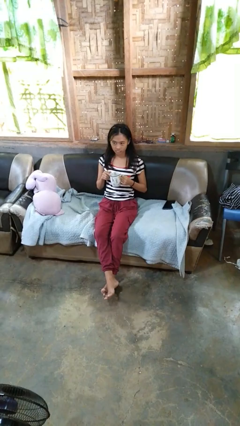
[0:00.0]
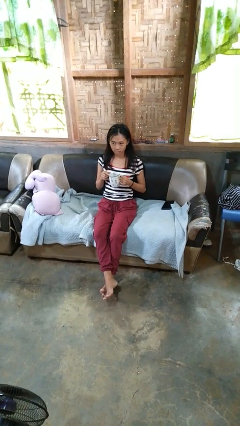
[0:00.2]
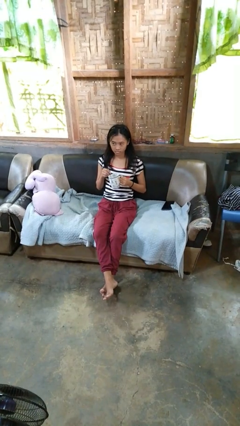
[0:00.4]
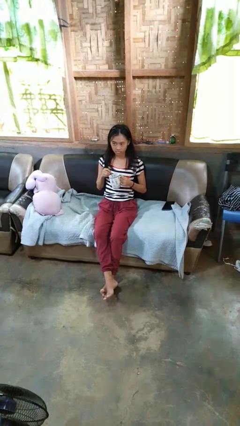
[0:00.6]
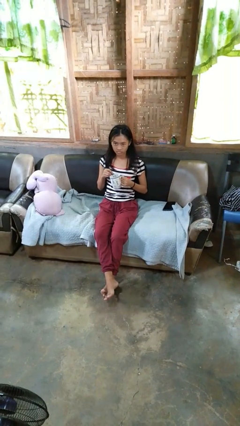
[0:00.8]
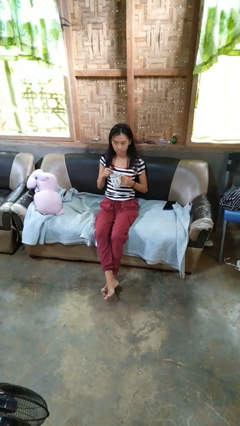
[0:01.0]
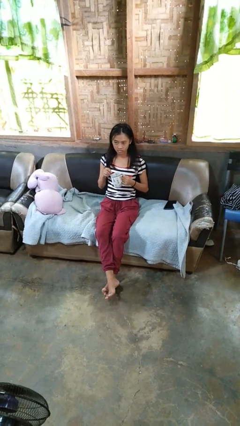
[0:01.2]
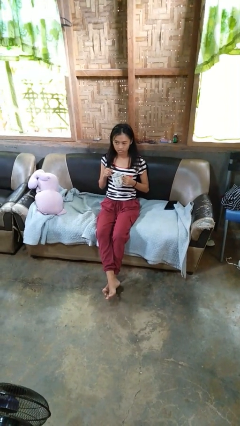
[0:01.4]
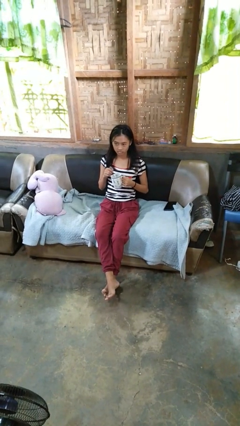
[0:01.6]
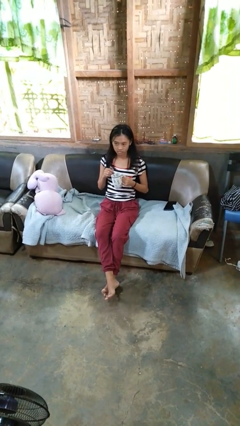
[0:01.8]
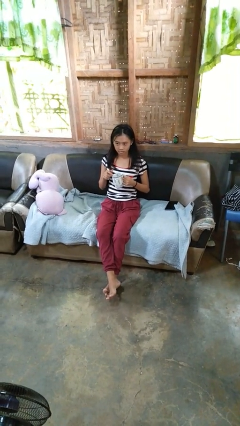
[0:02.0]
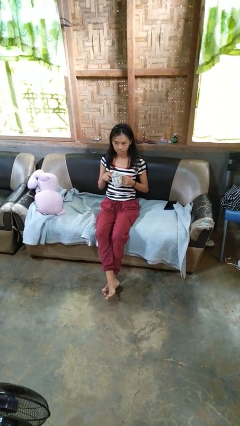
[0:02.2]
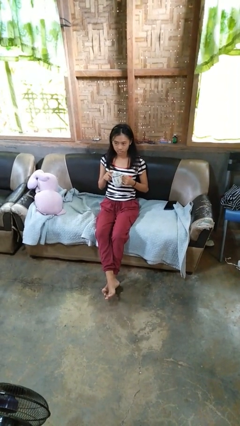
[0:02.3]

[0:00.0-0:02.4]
person stirs mug

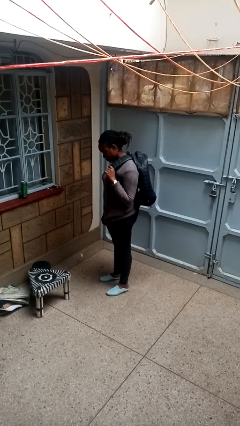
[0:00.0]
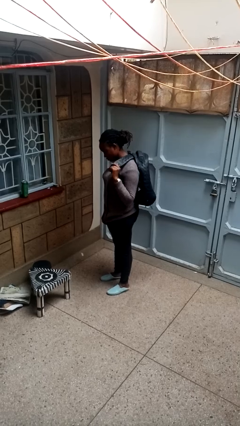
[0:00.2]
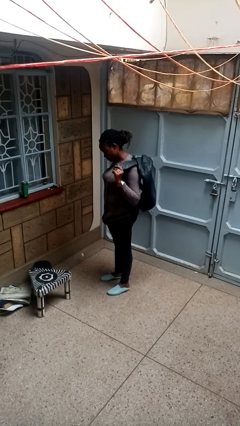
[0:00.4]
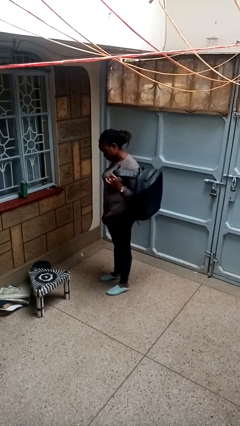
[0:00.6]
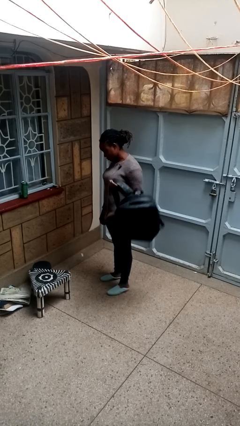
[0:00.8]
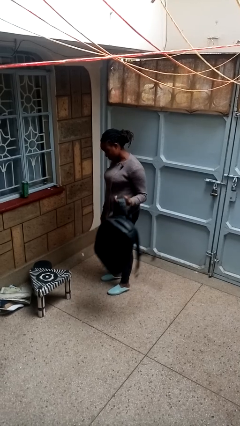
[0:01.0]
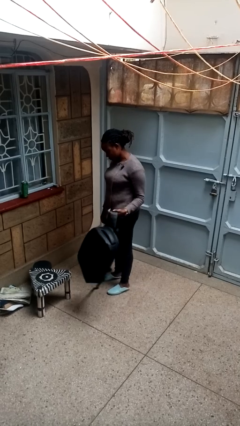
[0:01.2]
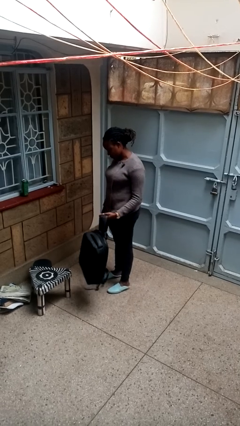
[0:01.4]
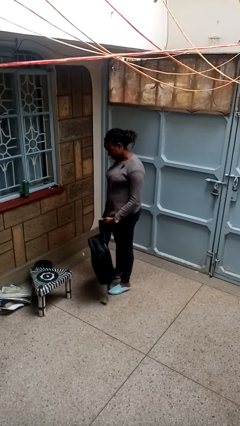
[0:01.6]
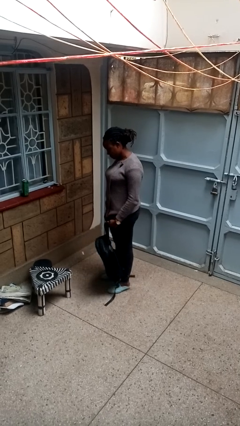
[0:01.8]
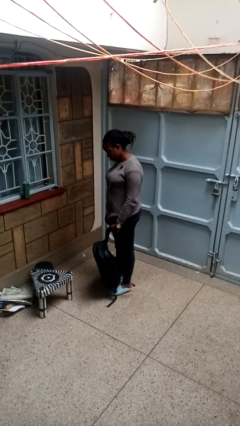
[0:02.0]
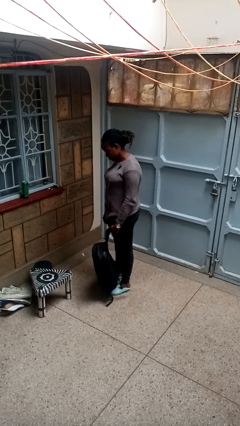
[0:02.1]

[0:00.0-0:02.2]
person takes off backpack

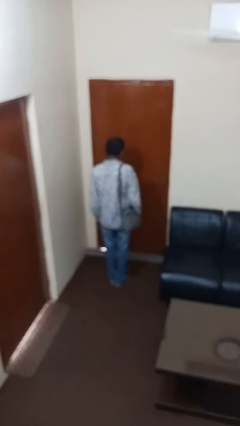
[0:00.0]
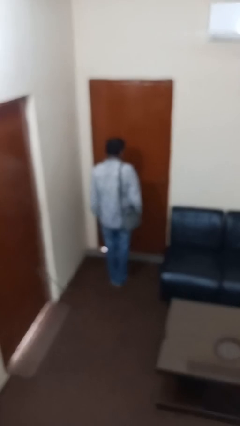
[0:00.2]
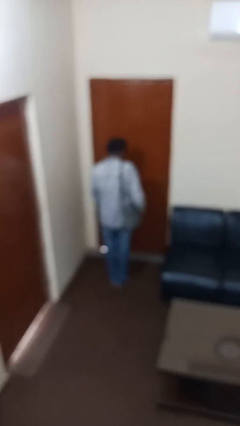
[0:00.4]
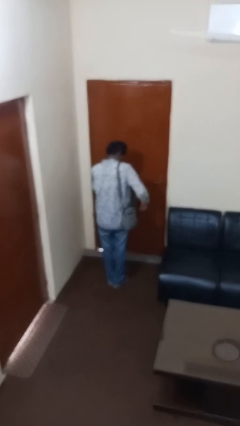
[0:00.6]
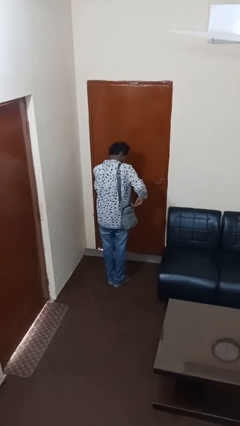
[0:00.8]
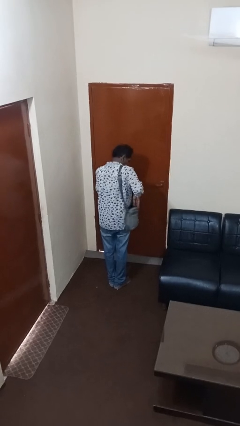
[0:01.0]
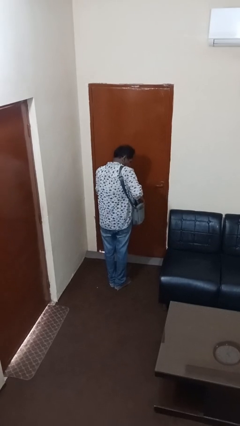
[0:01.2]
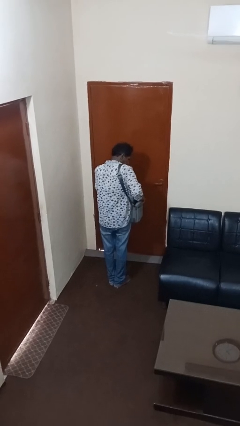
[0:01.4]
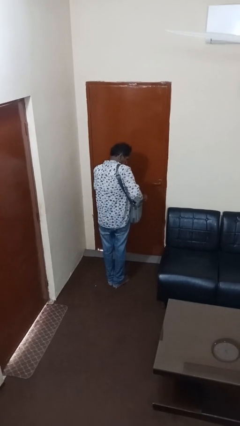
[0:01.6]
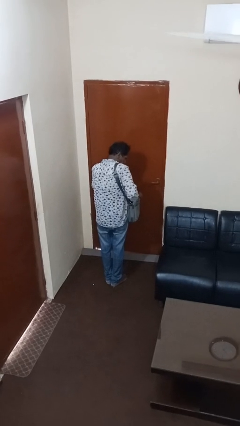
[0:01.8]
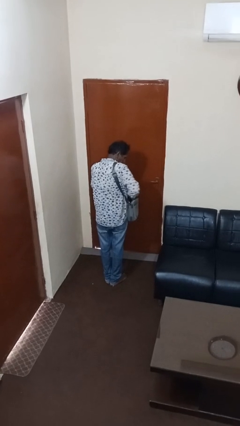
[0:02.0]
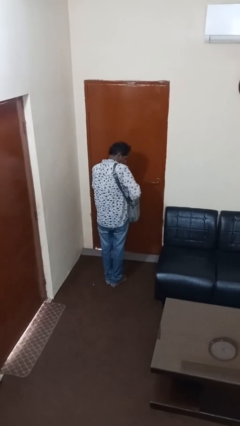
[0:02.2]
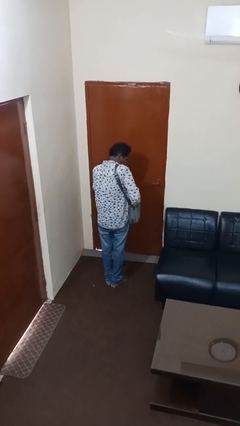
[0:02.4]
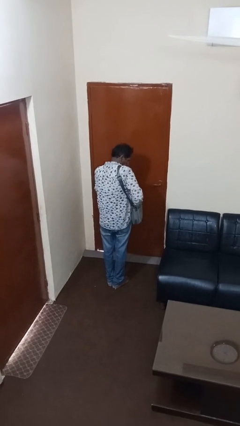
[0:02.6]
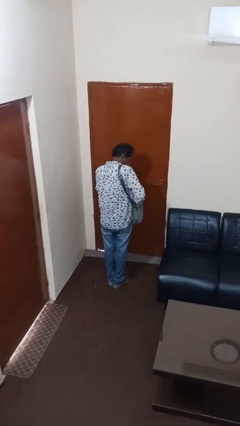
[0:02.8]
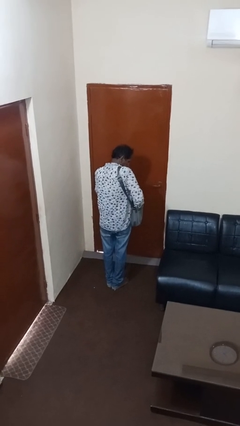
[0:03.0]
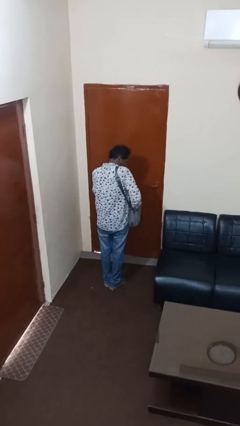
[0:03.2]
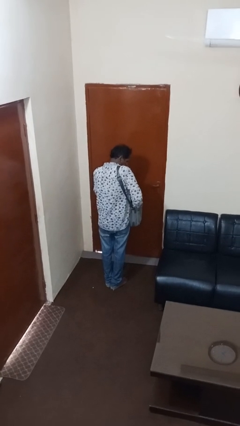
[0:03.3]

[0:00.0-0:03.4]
person searches in purse

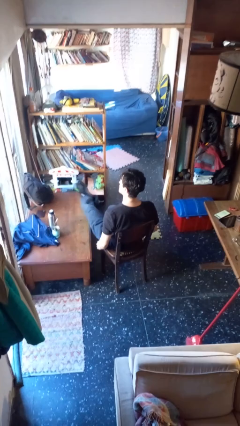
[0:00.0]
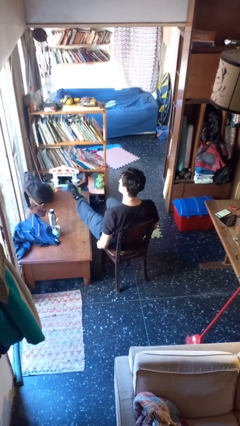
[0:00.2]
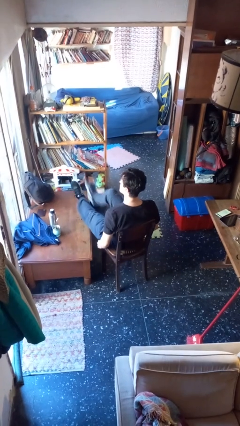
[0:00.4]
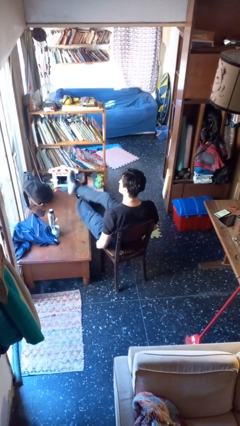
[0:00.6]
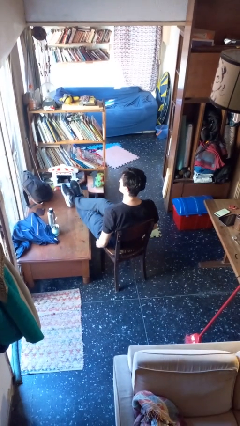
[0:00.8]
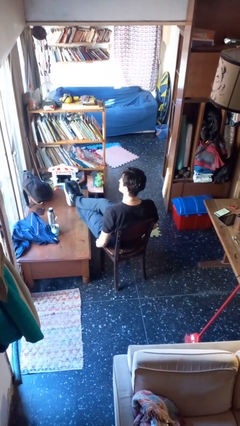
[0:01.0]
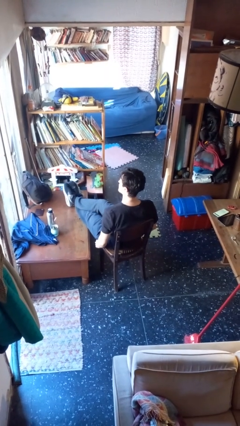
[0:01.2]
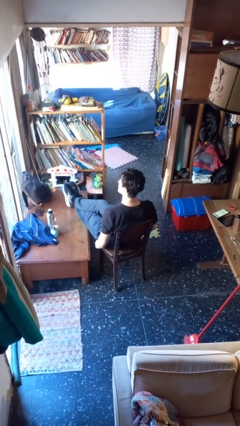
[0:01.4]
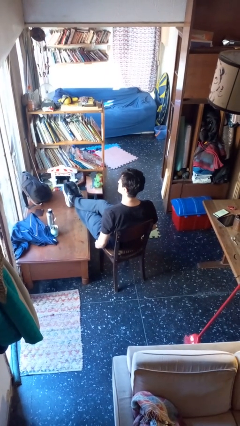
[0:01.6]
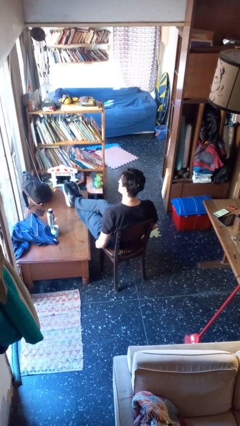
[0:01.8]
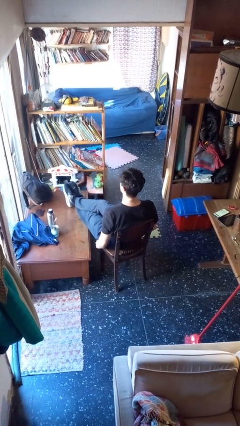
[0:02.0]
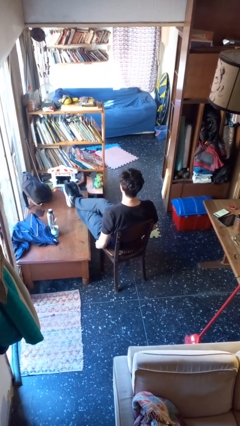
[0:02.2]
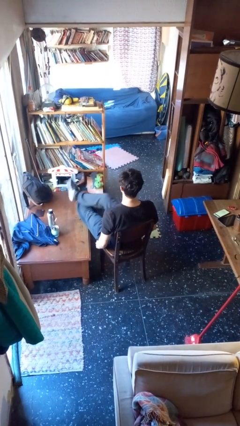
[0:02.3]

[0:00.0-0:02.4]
person puts feet up

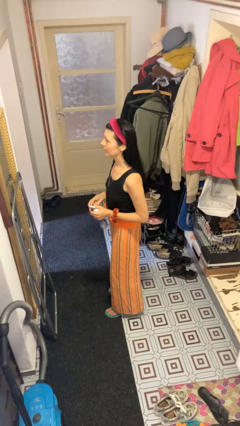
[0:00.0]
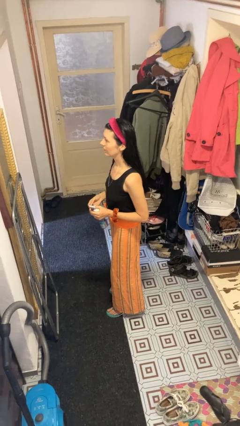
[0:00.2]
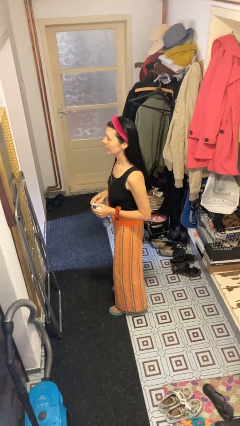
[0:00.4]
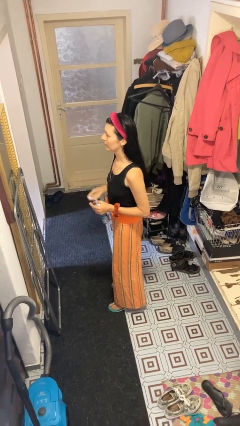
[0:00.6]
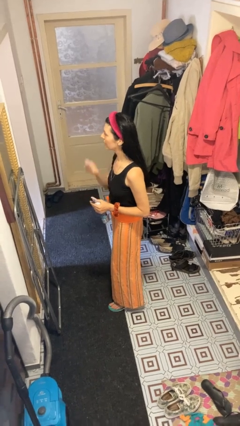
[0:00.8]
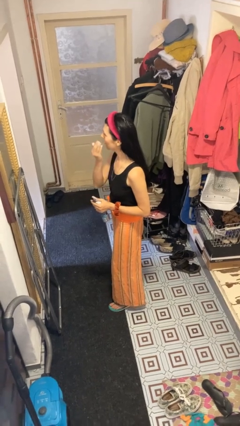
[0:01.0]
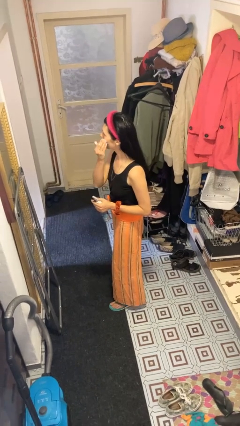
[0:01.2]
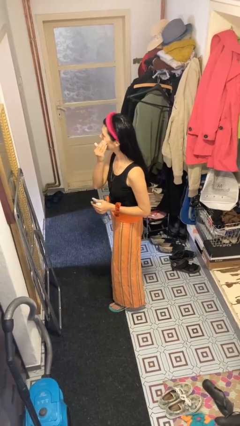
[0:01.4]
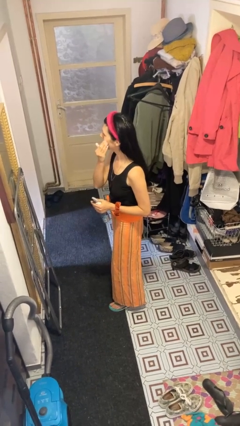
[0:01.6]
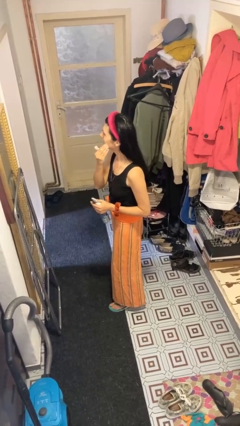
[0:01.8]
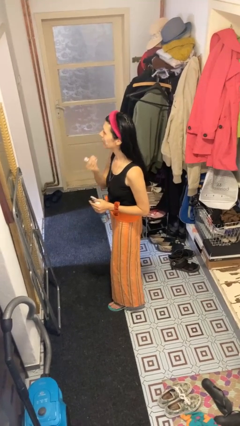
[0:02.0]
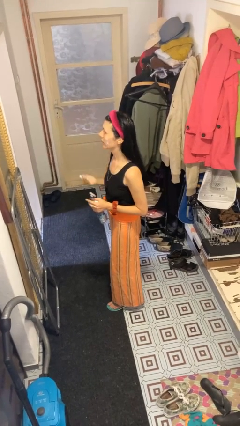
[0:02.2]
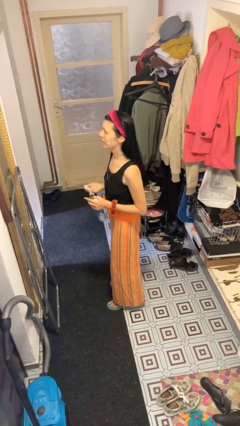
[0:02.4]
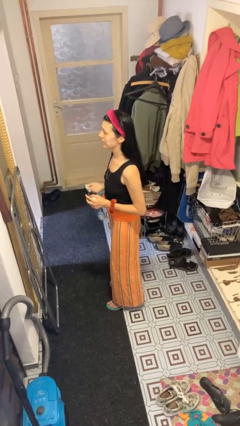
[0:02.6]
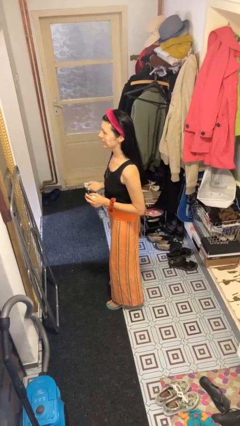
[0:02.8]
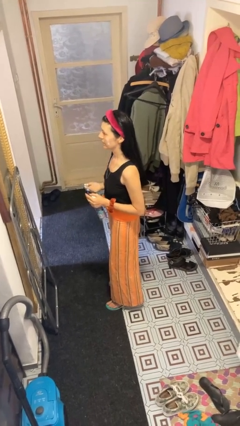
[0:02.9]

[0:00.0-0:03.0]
person applies shaving cream

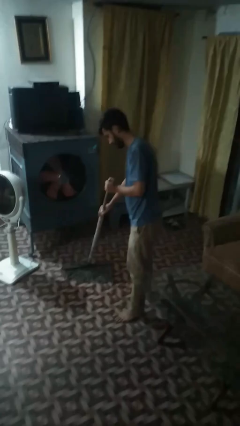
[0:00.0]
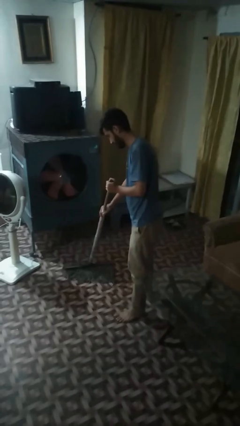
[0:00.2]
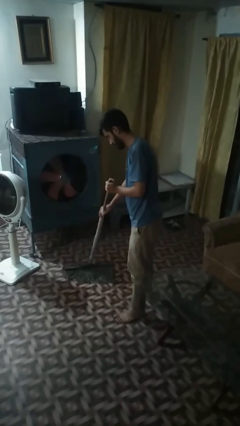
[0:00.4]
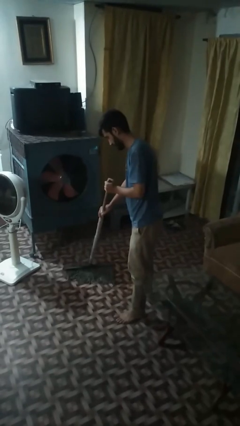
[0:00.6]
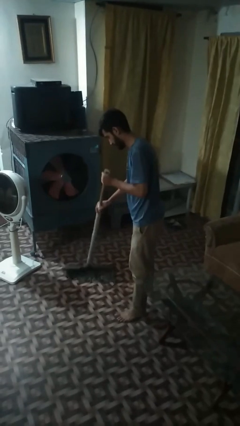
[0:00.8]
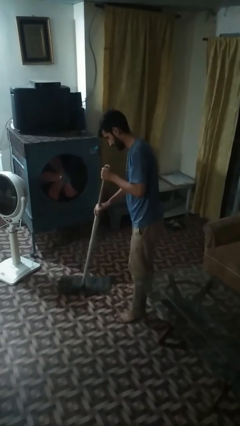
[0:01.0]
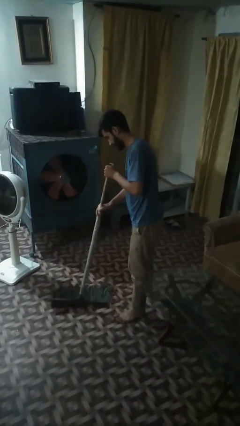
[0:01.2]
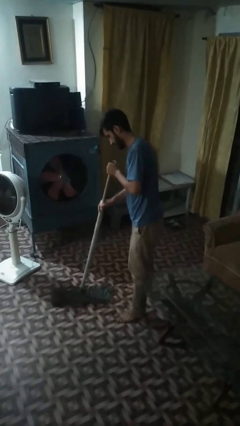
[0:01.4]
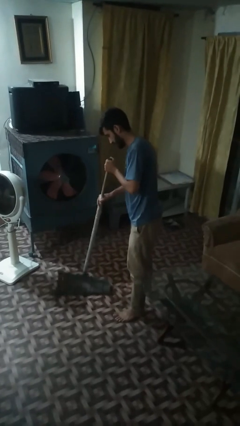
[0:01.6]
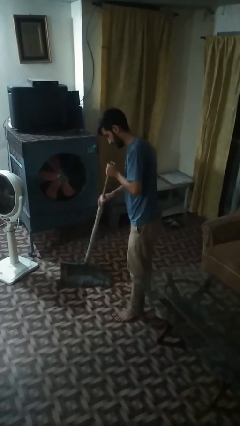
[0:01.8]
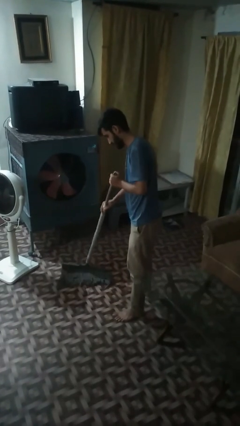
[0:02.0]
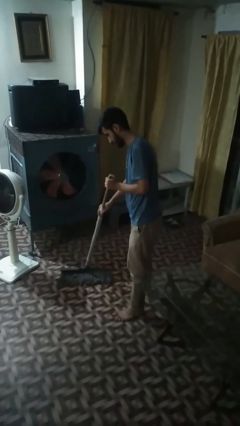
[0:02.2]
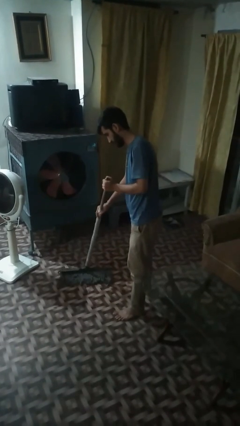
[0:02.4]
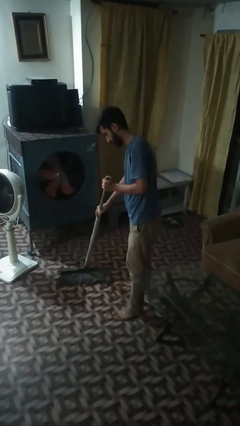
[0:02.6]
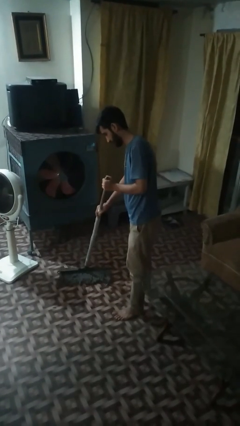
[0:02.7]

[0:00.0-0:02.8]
person mops

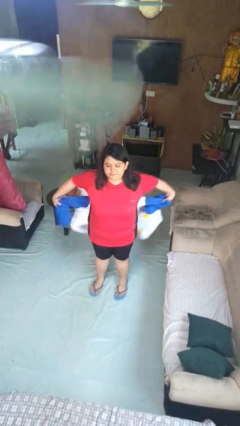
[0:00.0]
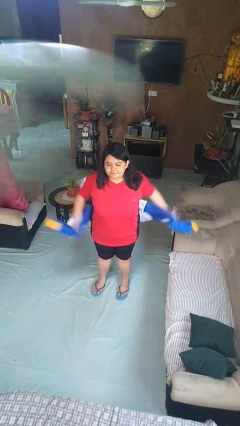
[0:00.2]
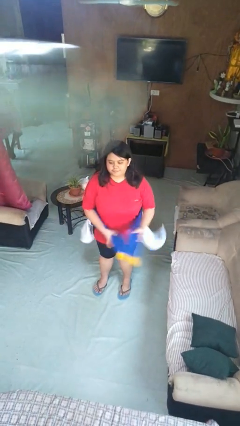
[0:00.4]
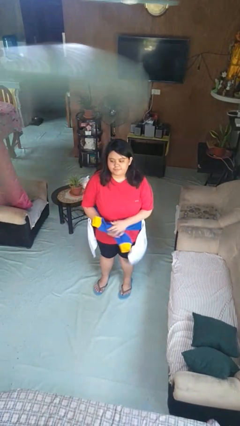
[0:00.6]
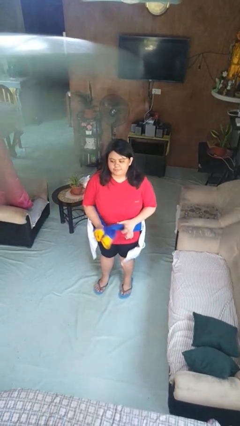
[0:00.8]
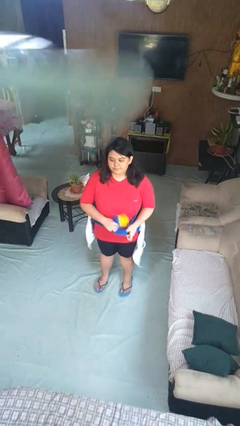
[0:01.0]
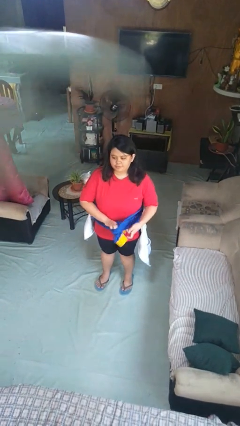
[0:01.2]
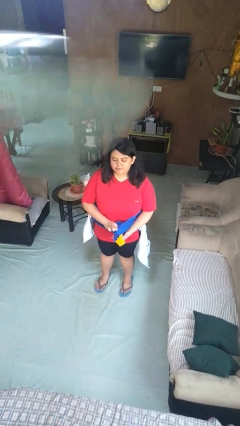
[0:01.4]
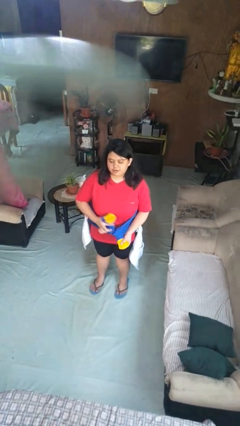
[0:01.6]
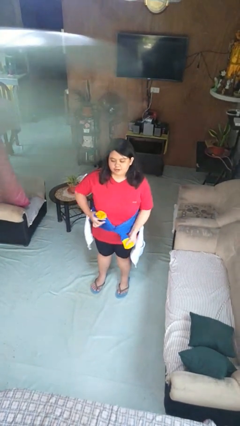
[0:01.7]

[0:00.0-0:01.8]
person ties jacket around waist
